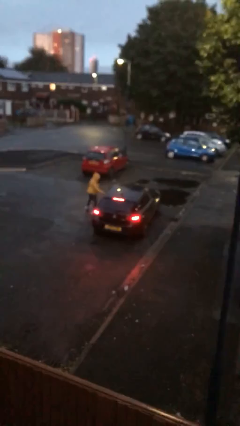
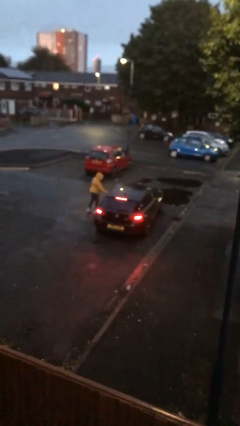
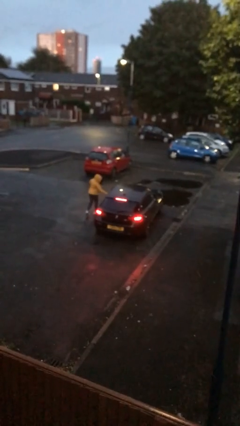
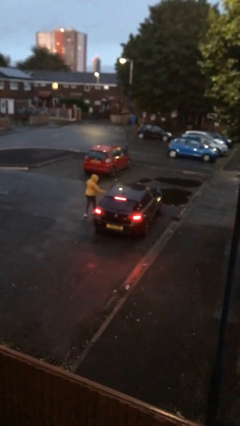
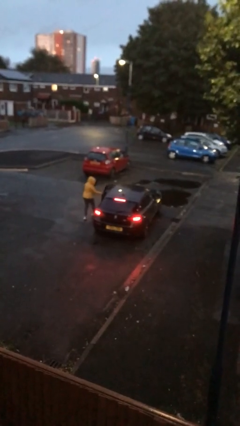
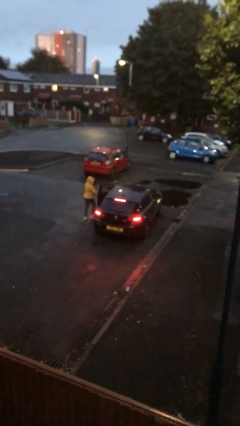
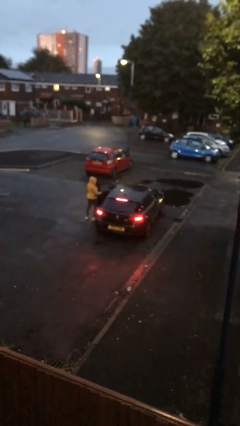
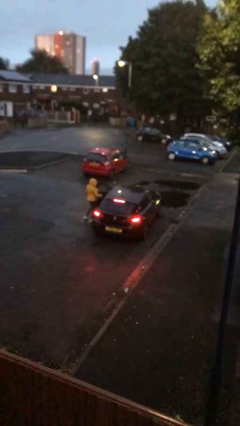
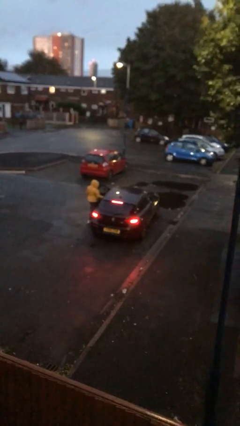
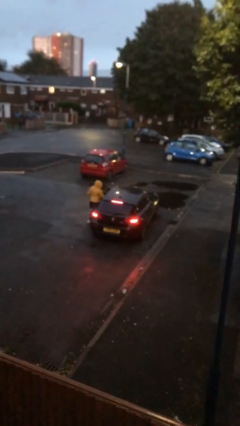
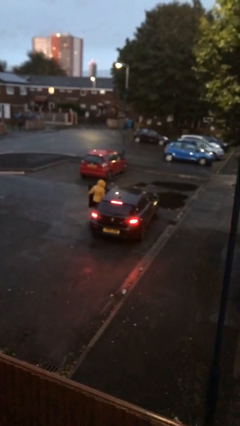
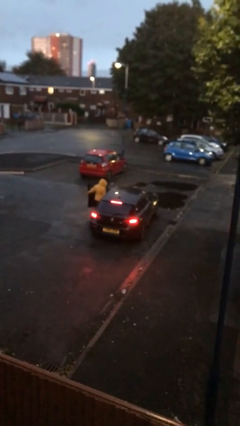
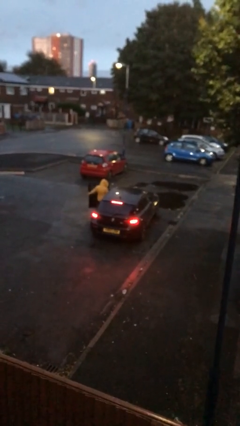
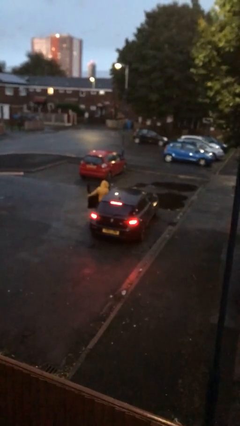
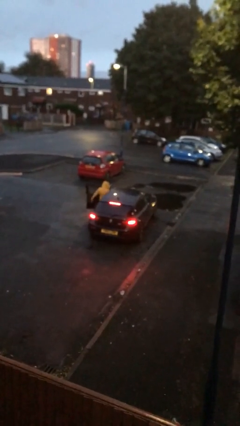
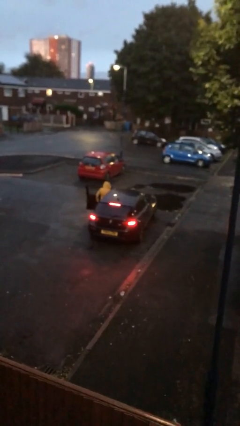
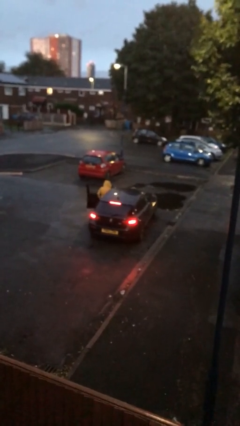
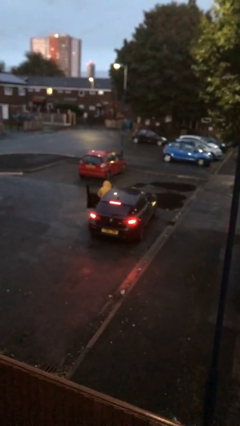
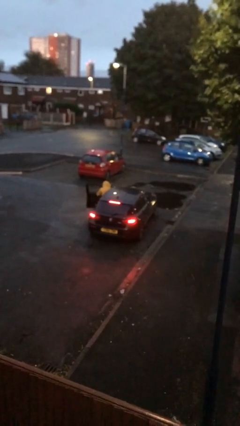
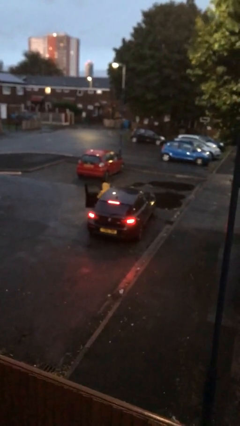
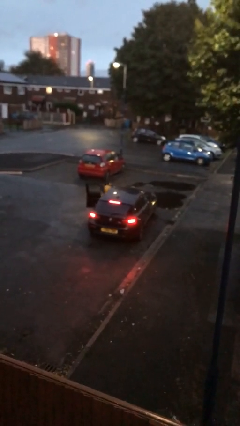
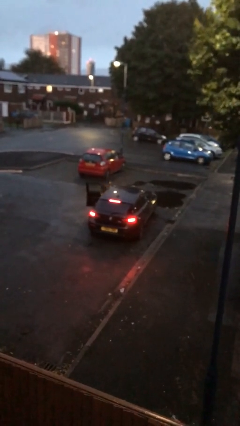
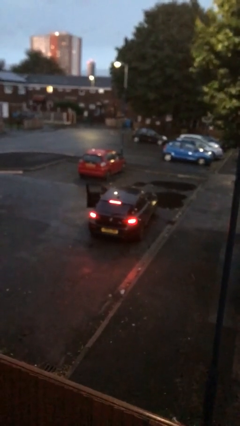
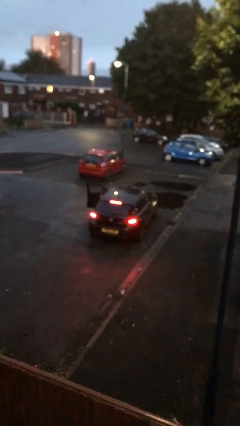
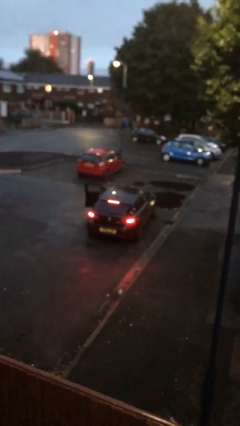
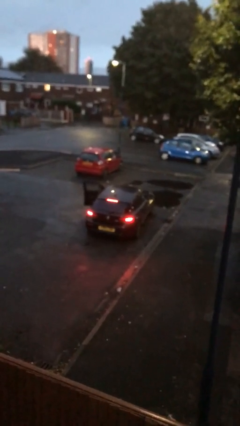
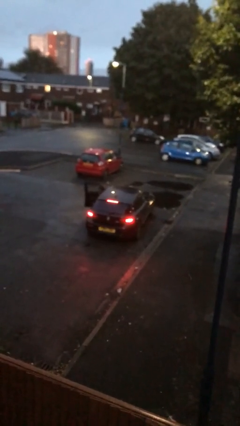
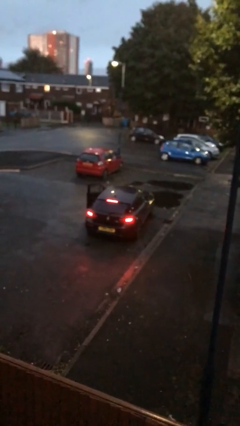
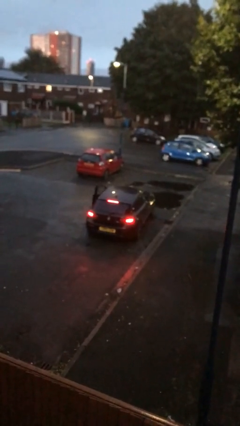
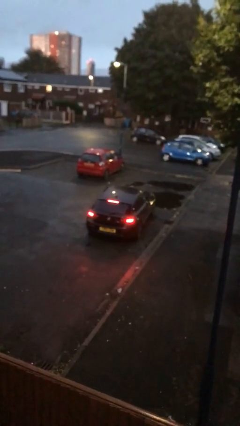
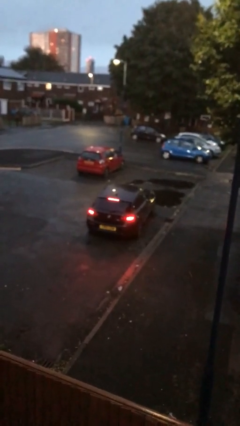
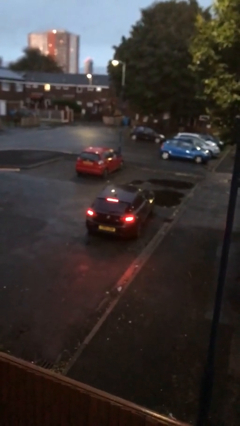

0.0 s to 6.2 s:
car picks up person

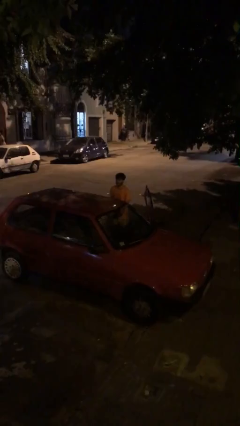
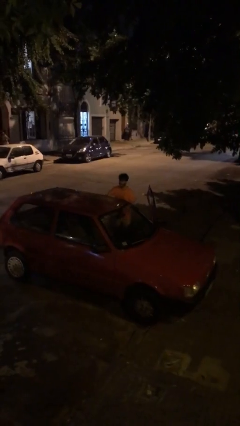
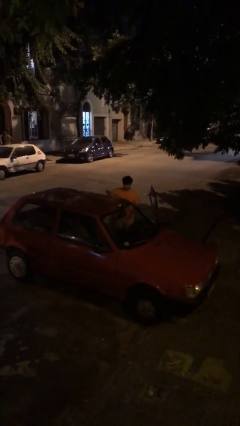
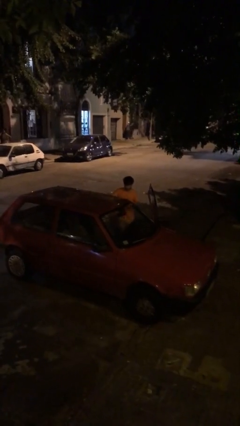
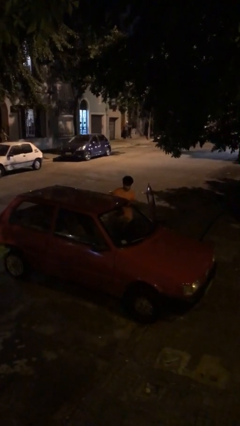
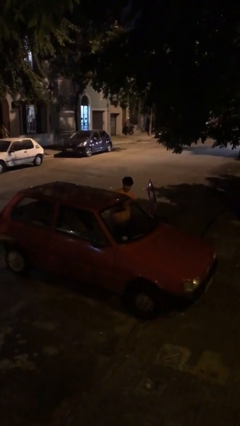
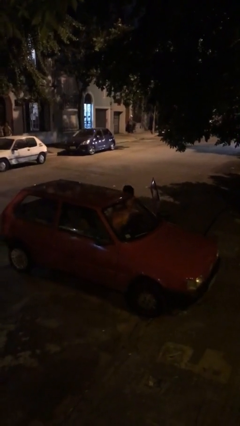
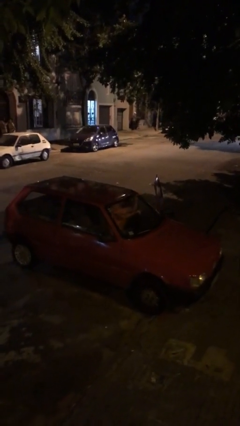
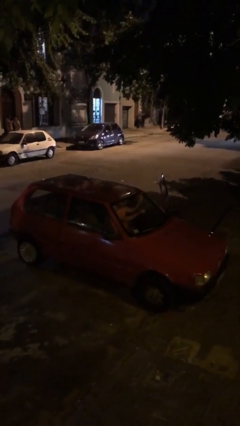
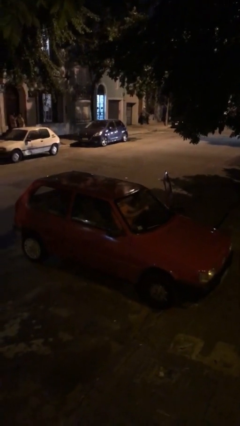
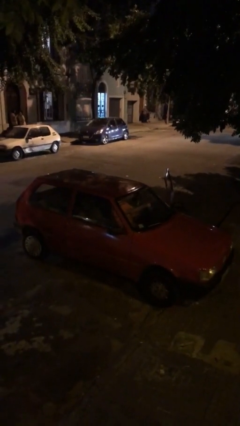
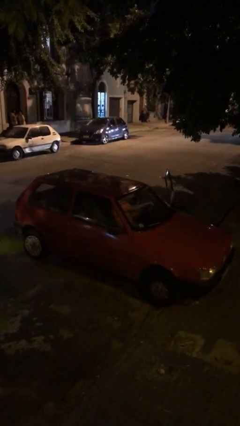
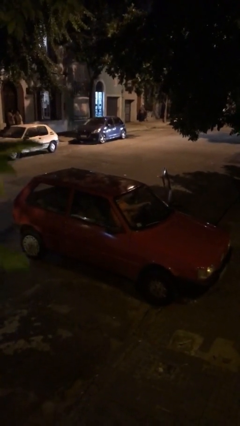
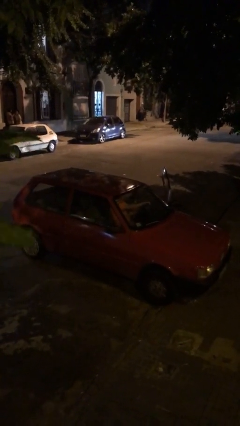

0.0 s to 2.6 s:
person enters car

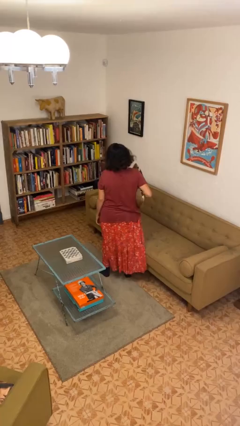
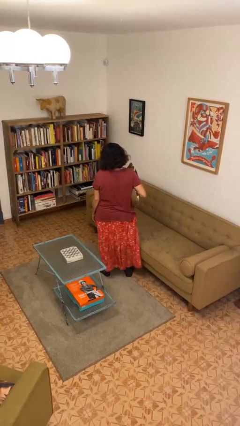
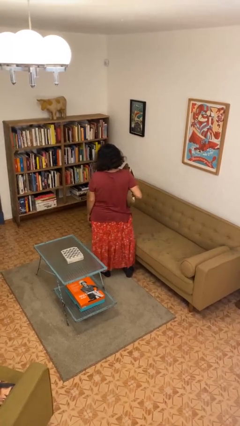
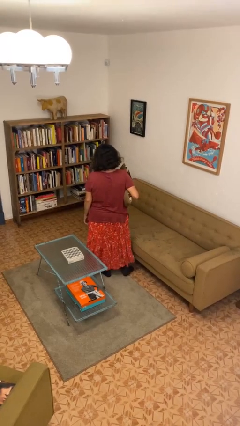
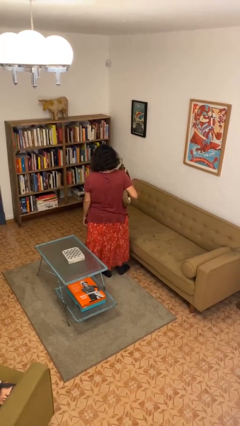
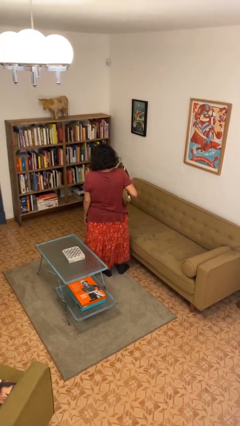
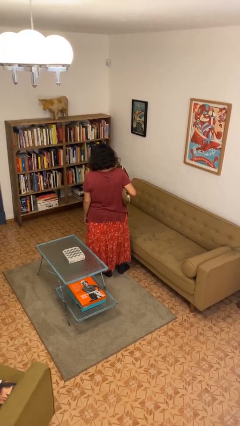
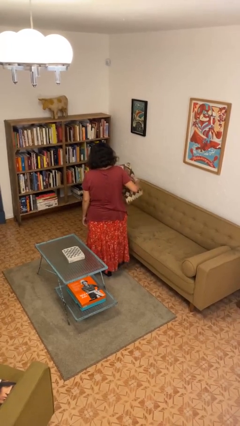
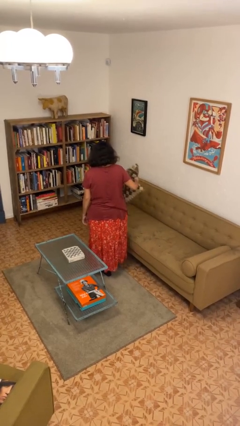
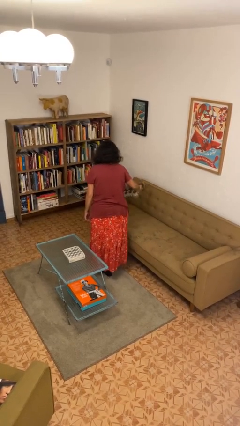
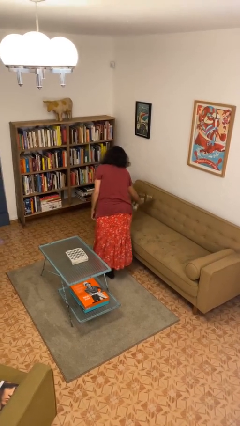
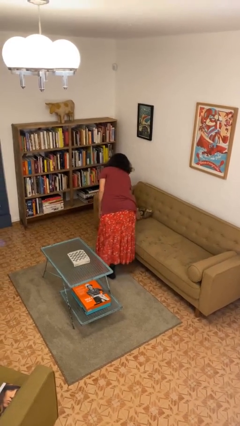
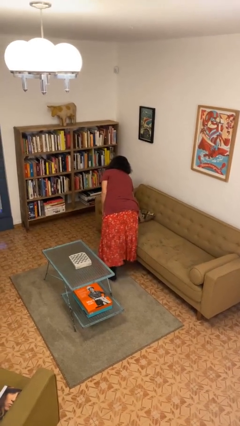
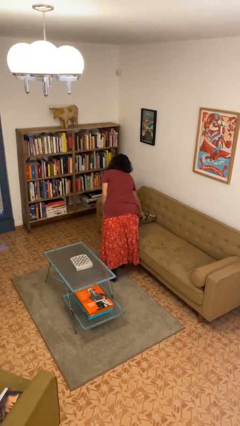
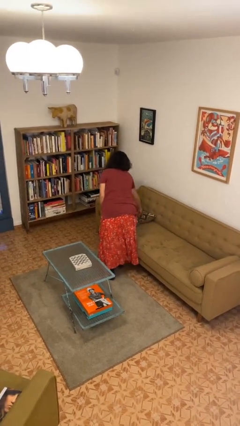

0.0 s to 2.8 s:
person puts down object on couch

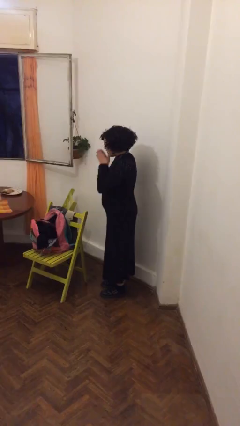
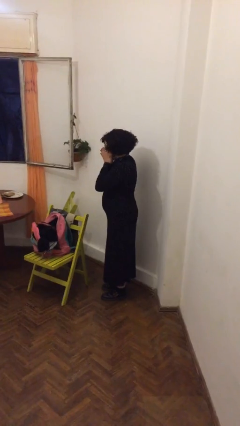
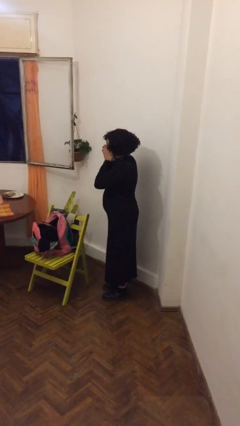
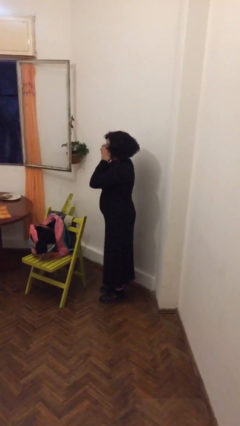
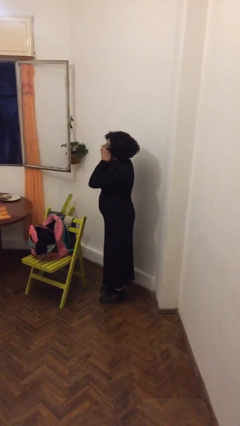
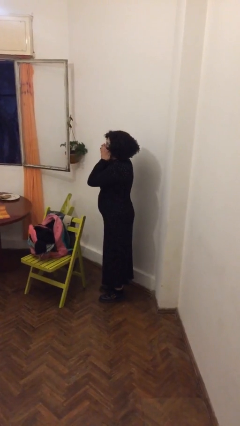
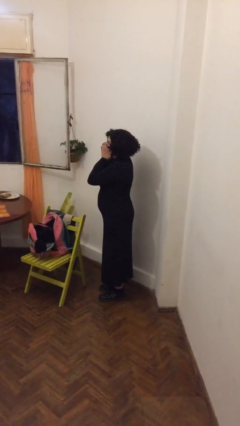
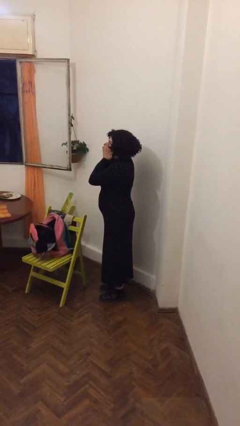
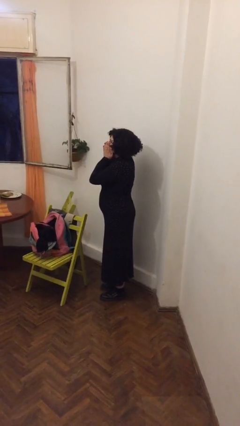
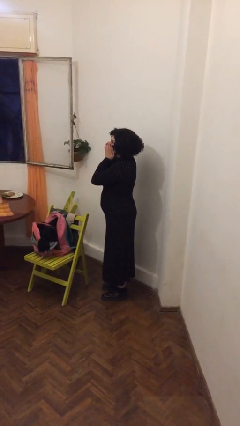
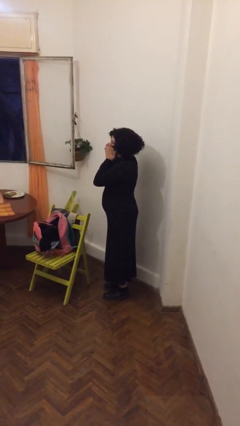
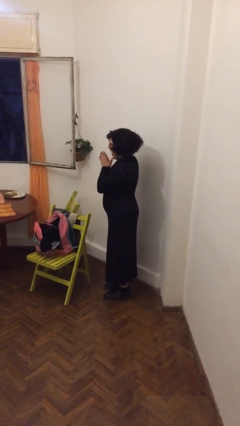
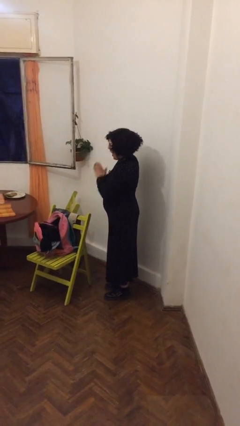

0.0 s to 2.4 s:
person yawns

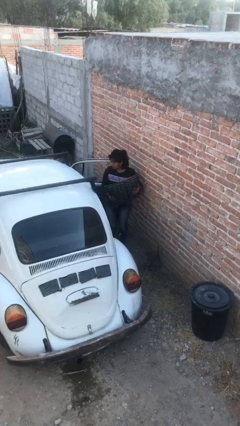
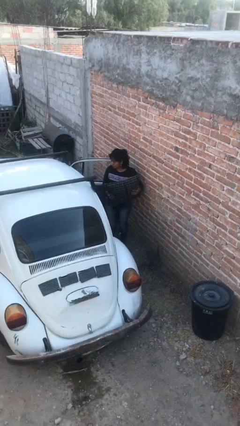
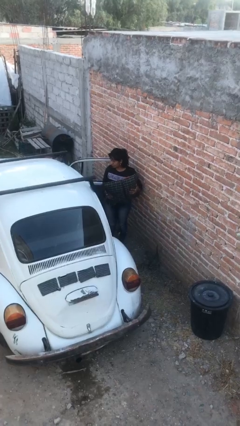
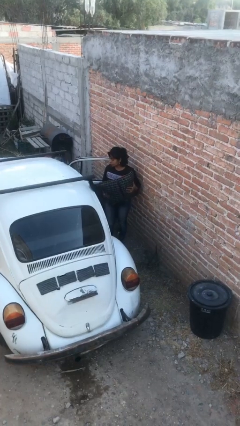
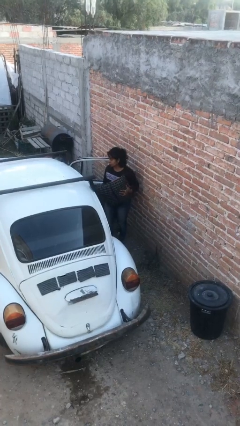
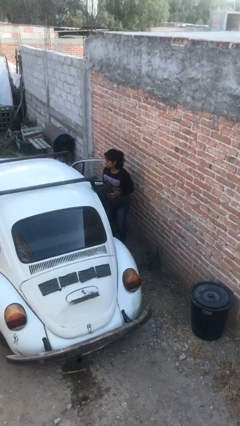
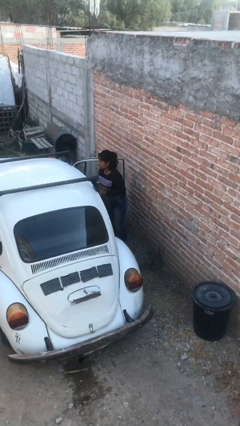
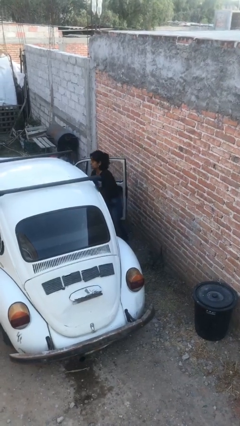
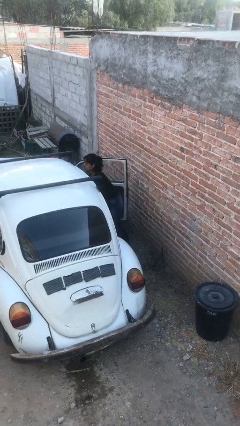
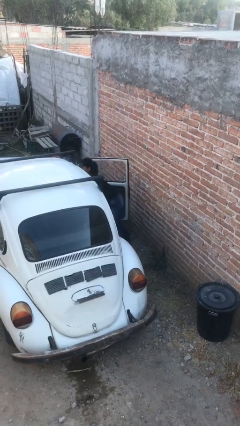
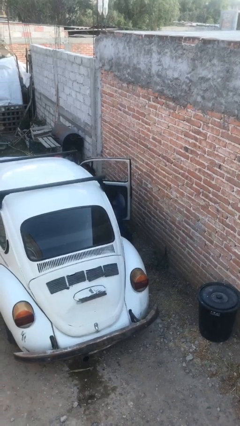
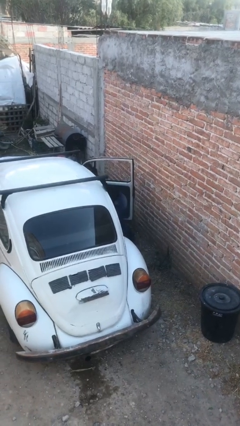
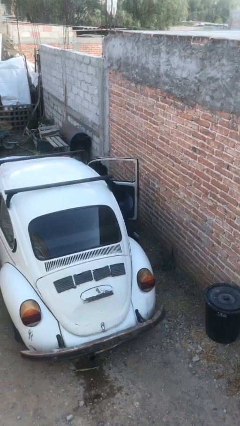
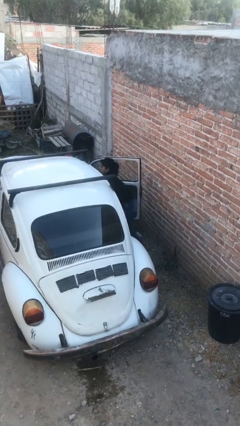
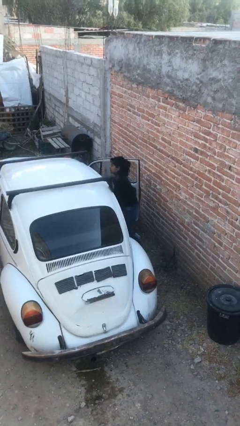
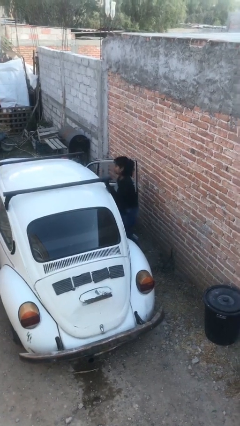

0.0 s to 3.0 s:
person loads car

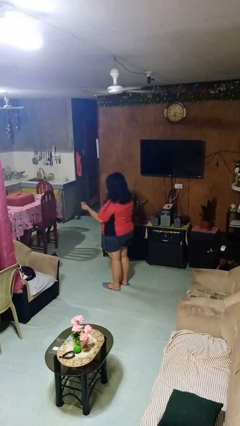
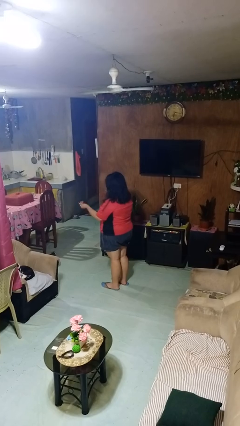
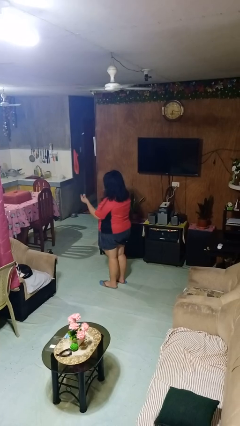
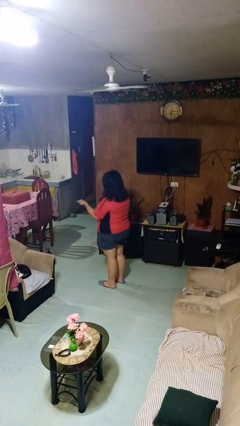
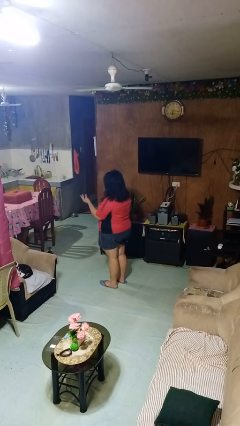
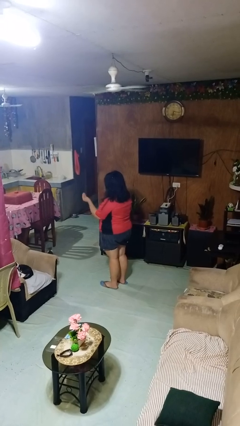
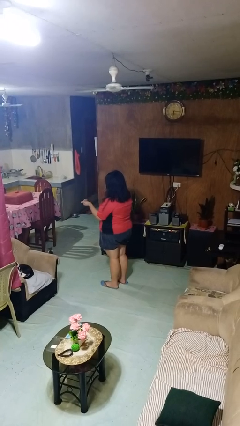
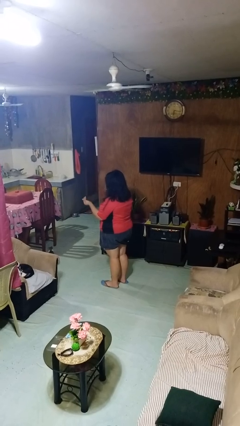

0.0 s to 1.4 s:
person snaps fingers
